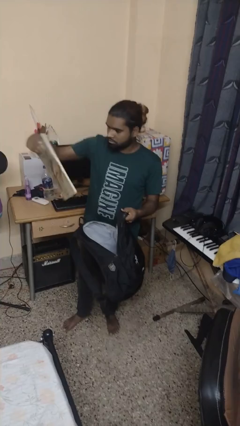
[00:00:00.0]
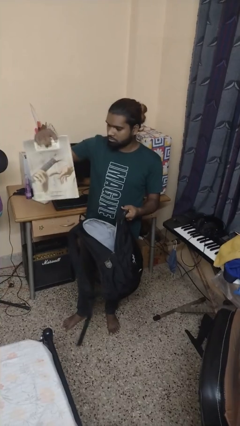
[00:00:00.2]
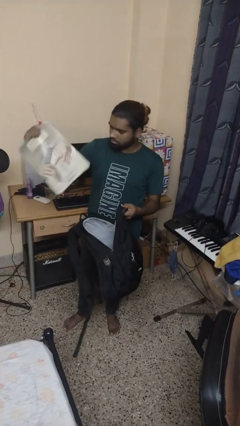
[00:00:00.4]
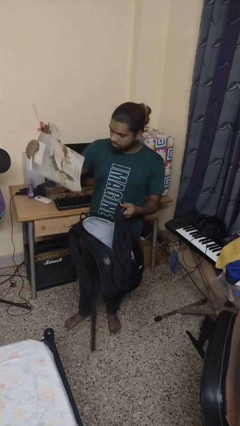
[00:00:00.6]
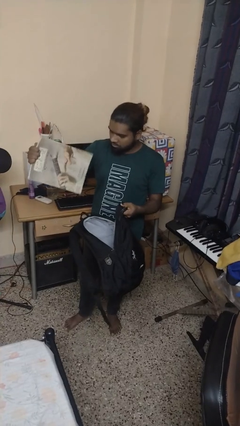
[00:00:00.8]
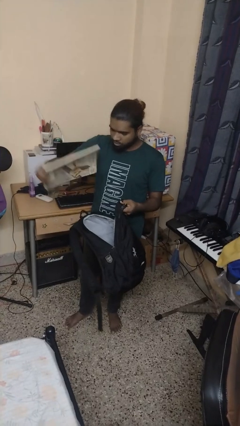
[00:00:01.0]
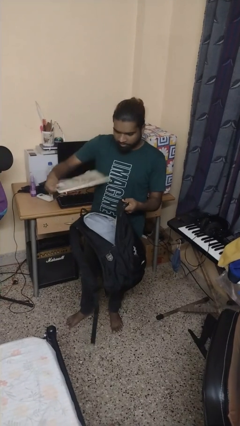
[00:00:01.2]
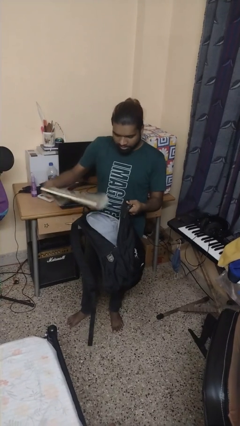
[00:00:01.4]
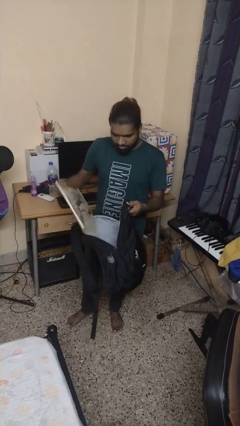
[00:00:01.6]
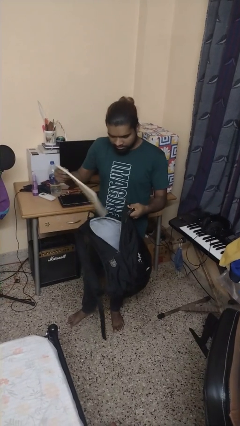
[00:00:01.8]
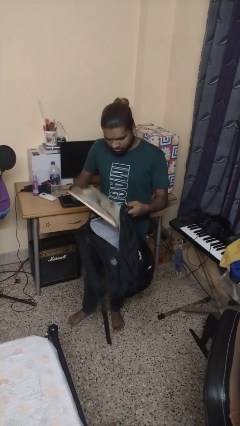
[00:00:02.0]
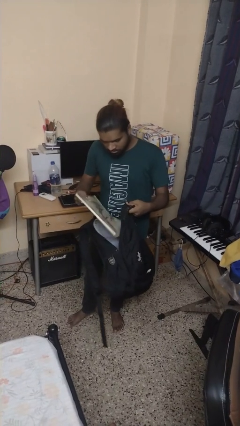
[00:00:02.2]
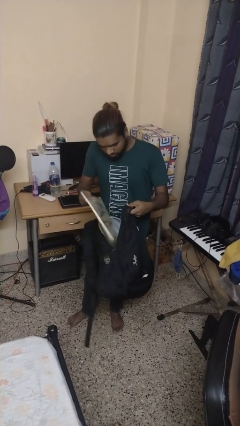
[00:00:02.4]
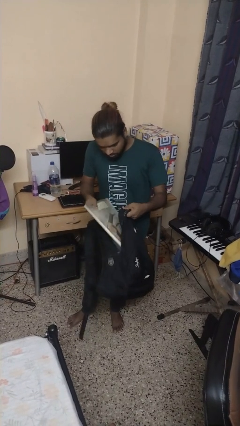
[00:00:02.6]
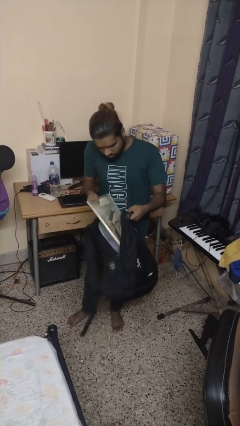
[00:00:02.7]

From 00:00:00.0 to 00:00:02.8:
person takes object from backpack

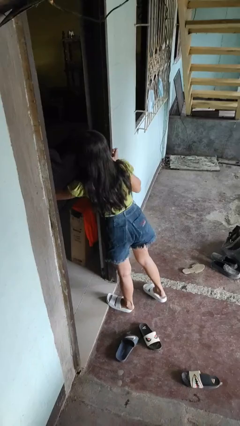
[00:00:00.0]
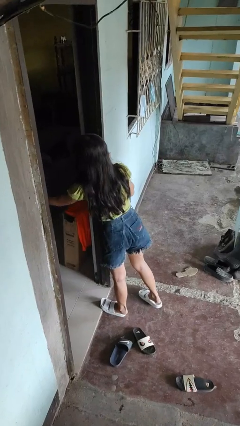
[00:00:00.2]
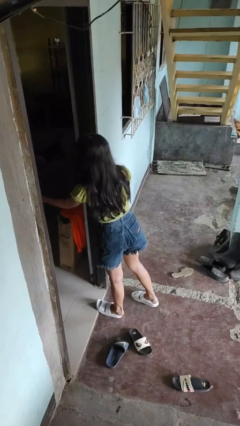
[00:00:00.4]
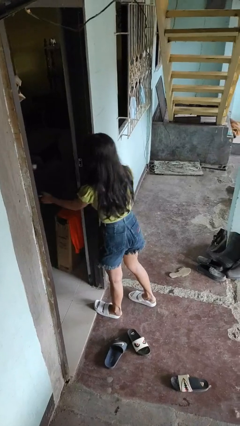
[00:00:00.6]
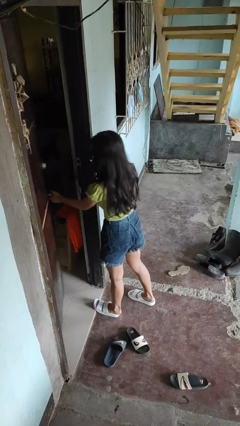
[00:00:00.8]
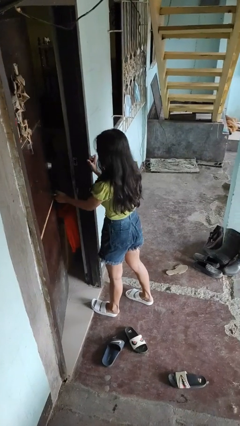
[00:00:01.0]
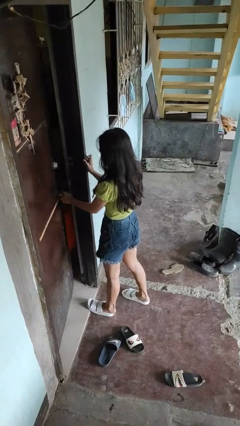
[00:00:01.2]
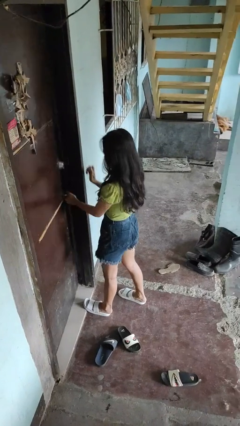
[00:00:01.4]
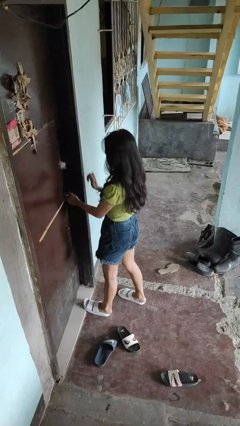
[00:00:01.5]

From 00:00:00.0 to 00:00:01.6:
person closes facility door

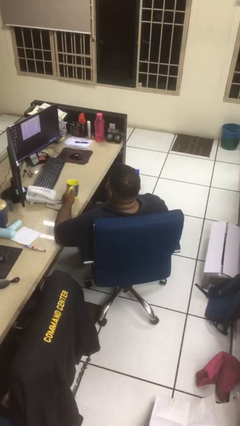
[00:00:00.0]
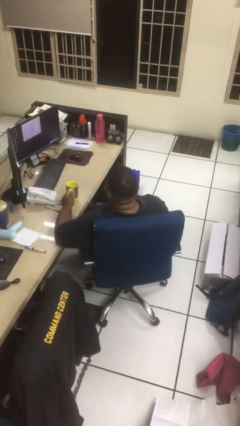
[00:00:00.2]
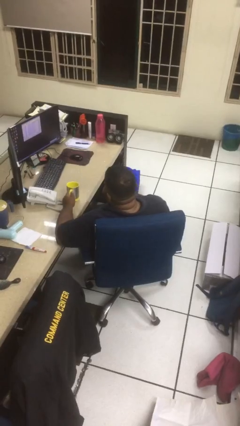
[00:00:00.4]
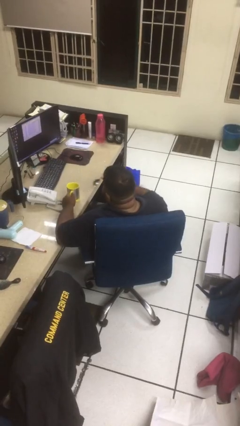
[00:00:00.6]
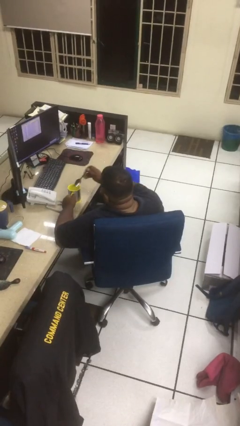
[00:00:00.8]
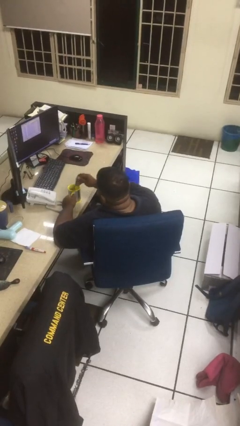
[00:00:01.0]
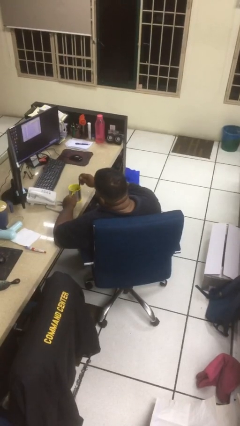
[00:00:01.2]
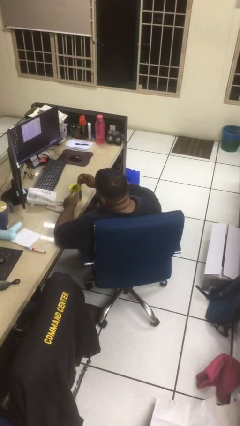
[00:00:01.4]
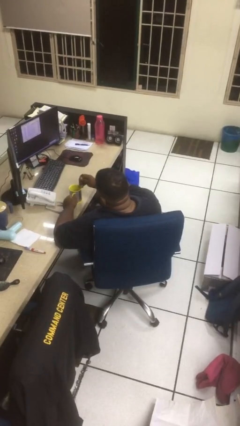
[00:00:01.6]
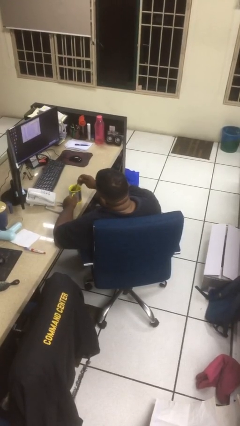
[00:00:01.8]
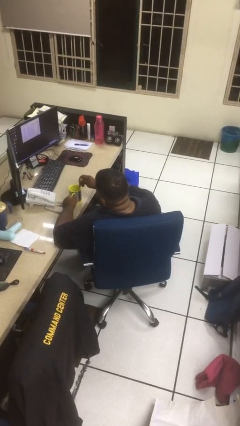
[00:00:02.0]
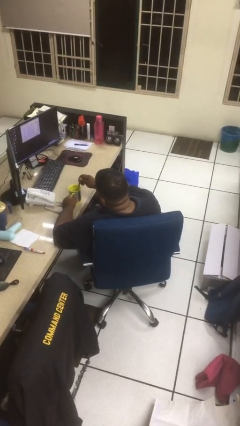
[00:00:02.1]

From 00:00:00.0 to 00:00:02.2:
person stirs mug

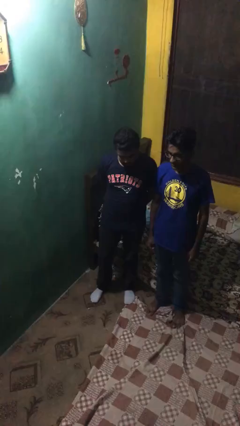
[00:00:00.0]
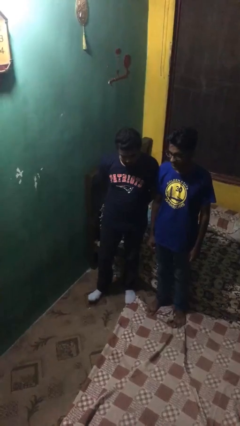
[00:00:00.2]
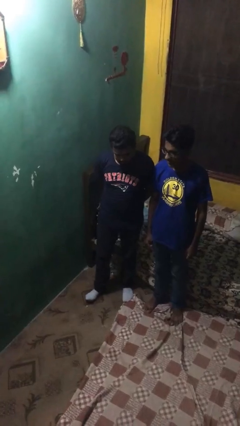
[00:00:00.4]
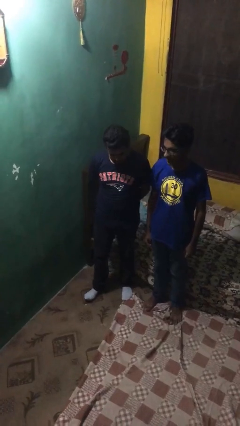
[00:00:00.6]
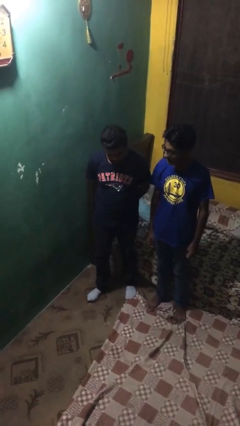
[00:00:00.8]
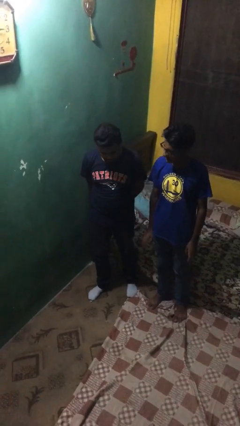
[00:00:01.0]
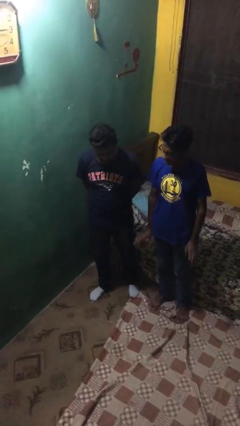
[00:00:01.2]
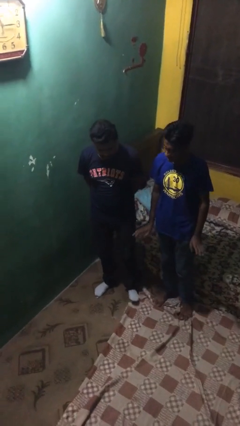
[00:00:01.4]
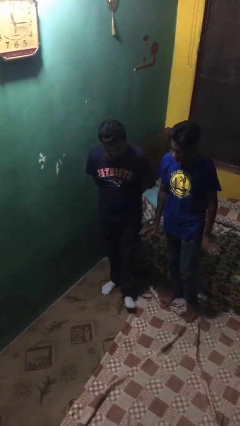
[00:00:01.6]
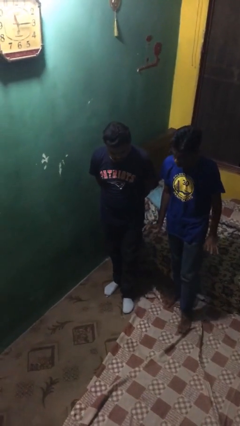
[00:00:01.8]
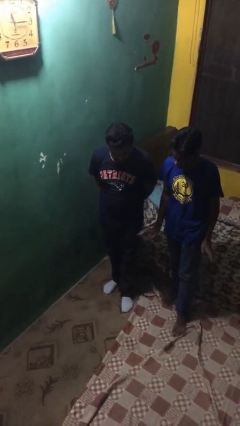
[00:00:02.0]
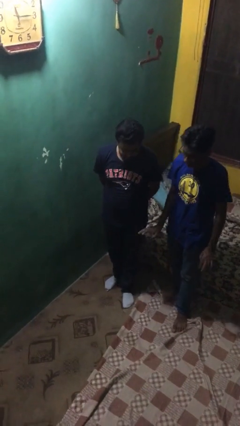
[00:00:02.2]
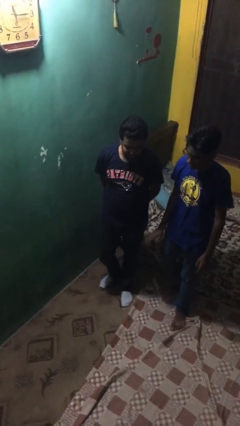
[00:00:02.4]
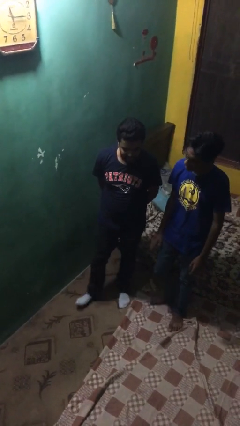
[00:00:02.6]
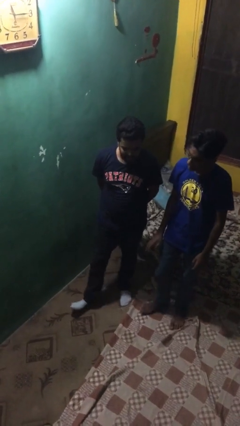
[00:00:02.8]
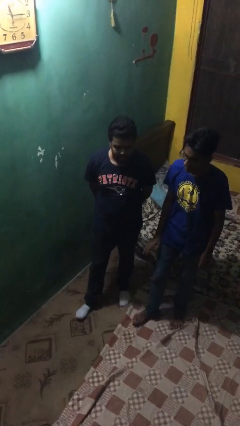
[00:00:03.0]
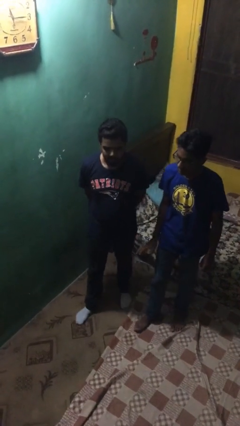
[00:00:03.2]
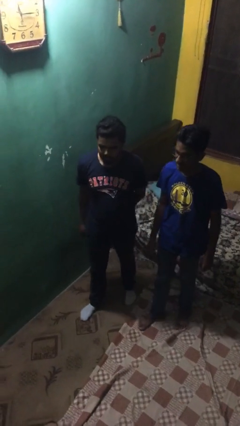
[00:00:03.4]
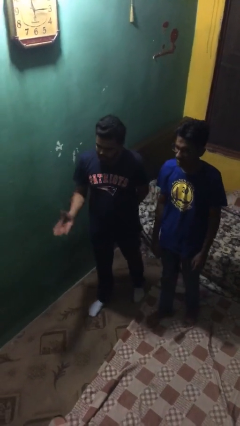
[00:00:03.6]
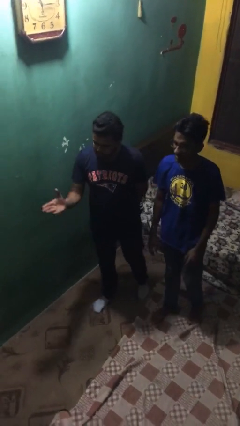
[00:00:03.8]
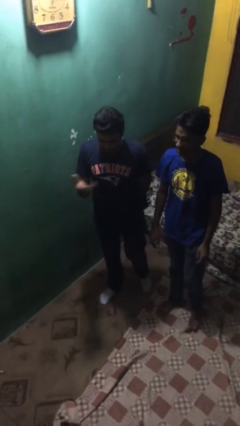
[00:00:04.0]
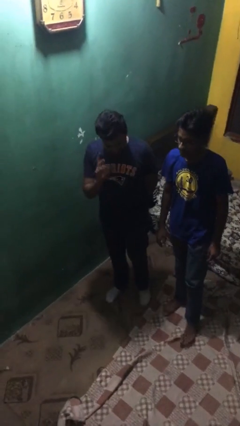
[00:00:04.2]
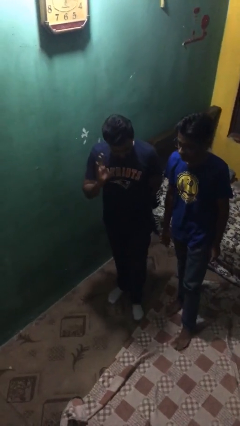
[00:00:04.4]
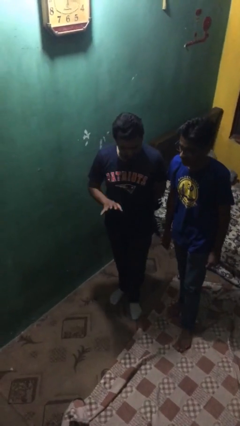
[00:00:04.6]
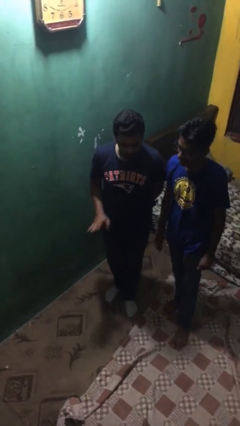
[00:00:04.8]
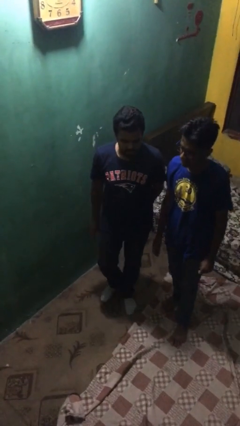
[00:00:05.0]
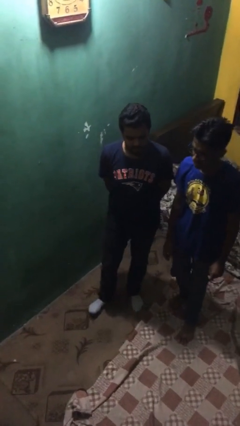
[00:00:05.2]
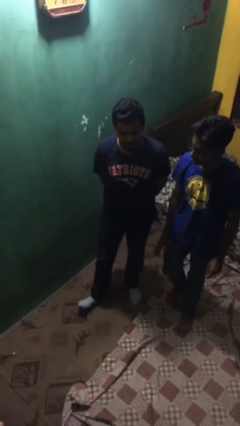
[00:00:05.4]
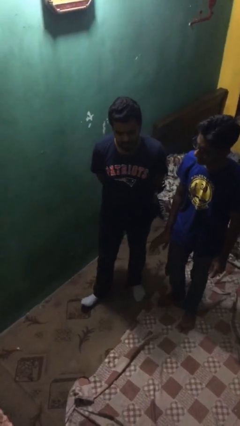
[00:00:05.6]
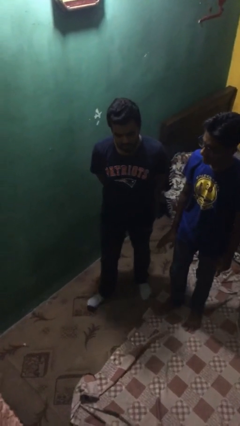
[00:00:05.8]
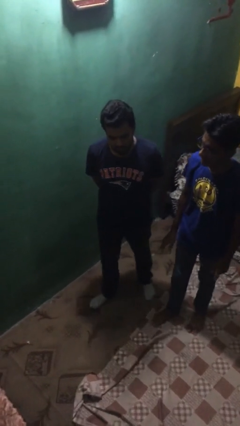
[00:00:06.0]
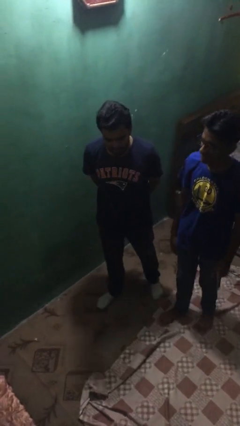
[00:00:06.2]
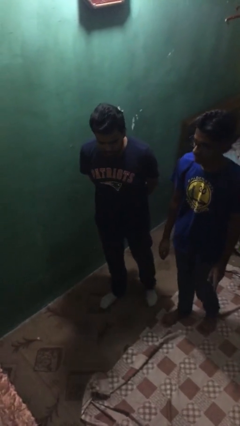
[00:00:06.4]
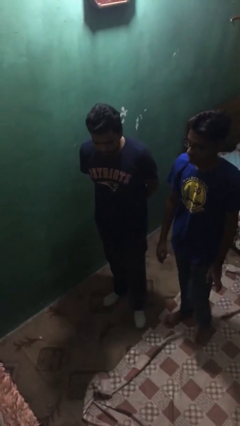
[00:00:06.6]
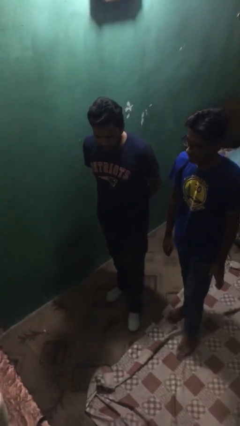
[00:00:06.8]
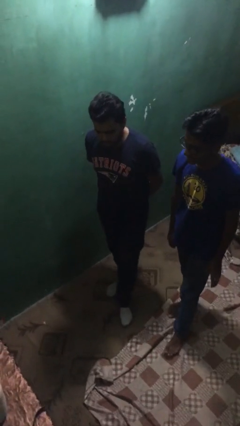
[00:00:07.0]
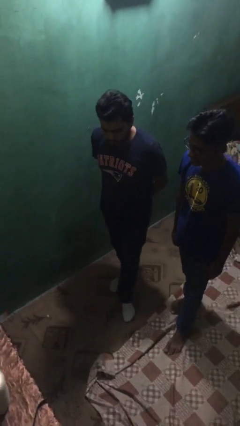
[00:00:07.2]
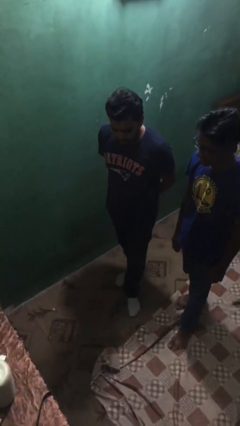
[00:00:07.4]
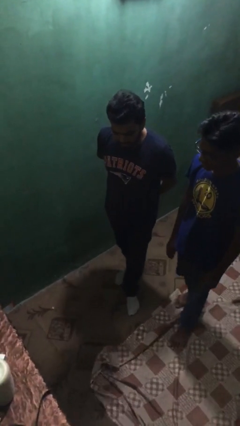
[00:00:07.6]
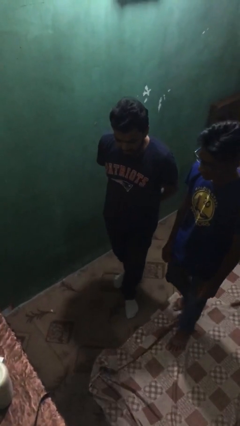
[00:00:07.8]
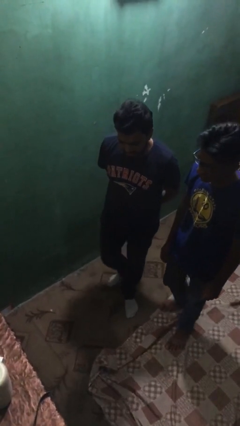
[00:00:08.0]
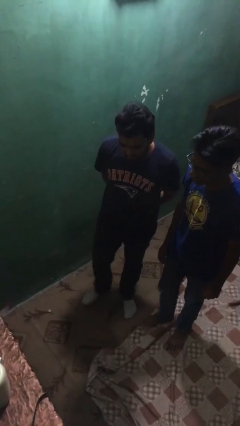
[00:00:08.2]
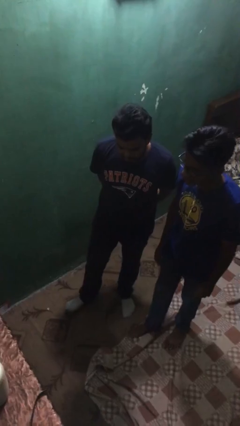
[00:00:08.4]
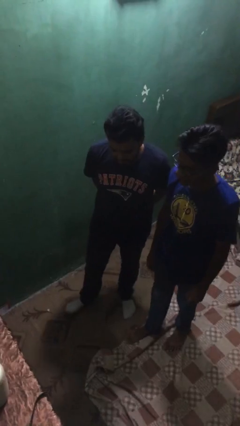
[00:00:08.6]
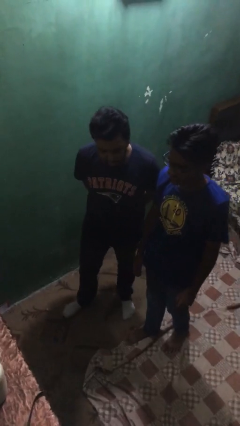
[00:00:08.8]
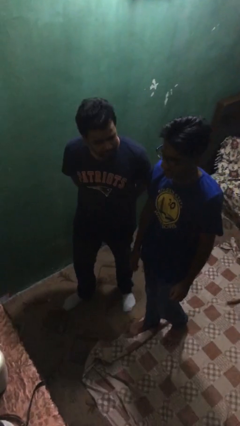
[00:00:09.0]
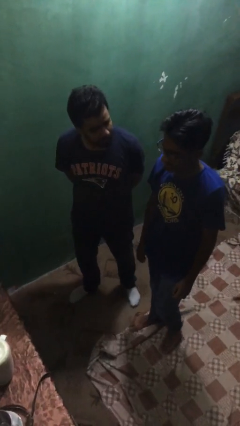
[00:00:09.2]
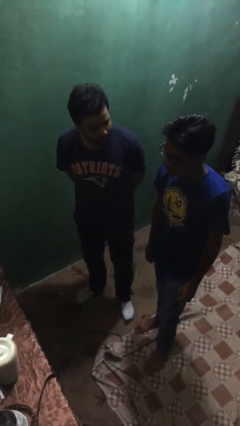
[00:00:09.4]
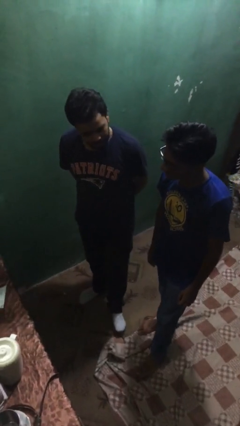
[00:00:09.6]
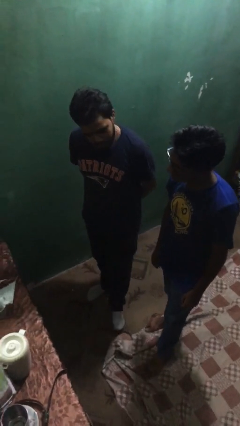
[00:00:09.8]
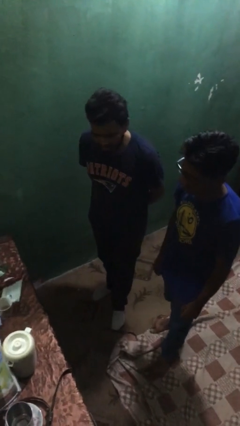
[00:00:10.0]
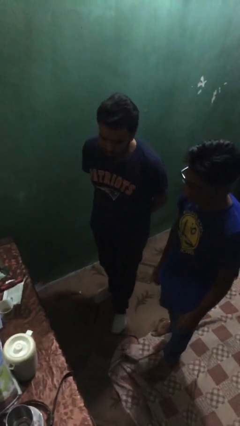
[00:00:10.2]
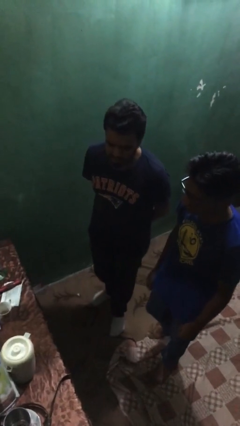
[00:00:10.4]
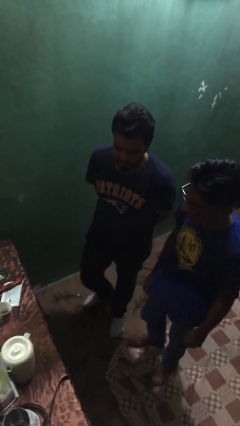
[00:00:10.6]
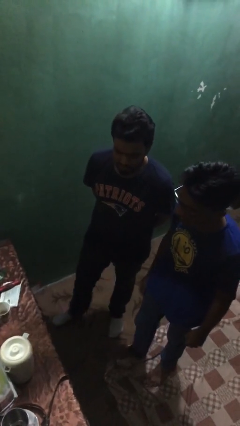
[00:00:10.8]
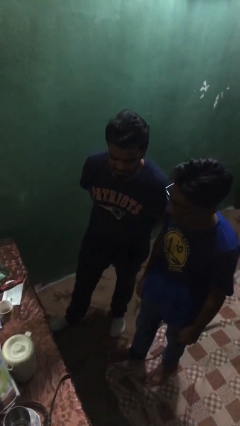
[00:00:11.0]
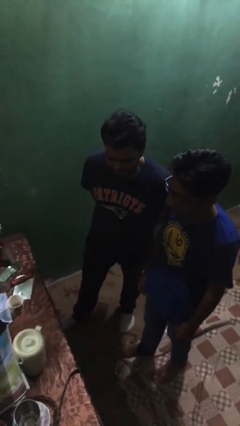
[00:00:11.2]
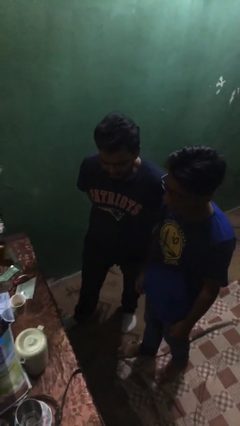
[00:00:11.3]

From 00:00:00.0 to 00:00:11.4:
person talks to person
